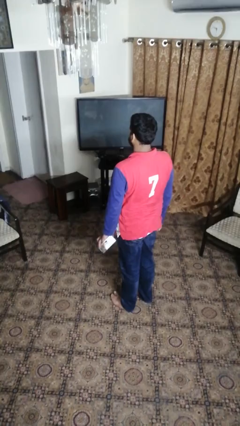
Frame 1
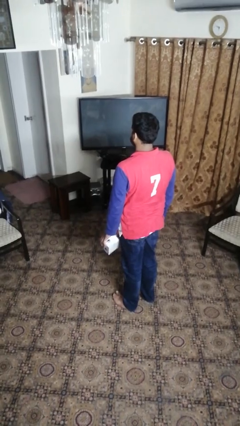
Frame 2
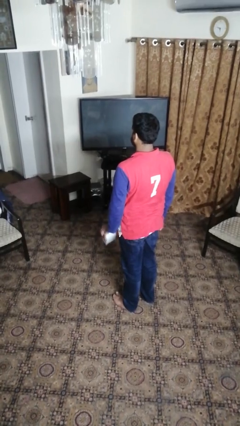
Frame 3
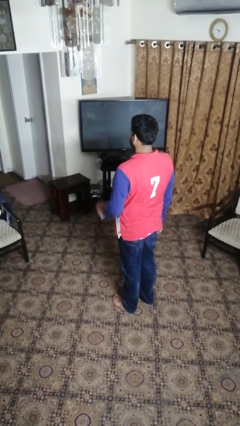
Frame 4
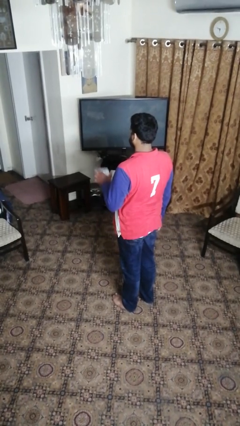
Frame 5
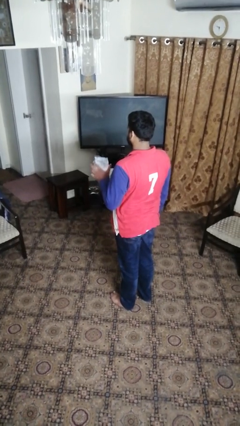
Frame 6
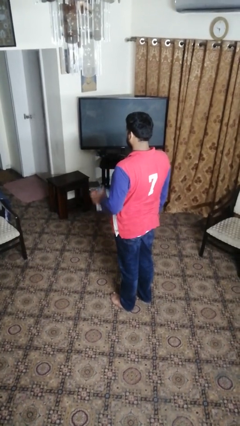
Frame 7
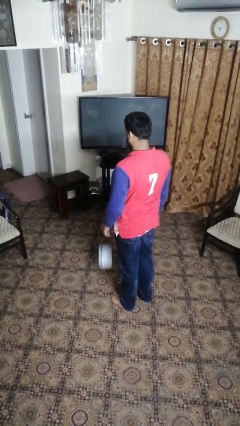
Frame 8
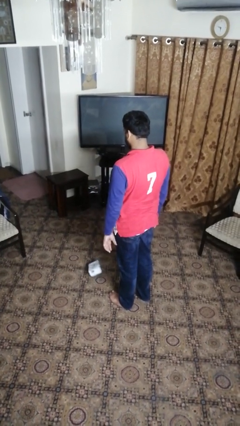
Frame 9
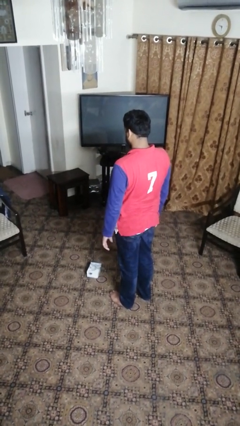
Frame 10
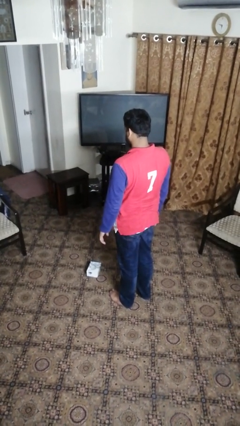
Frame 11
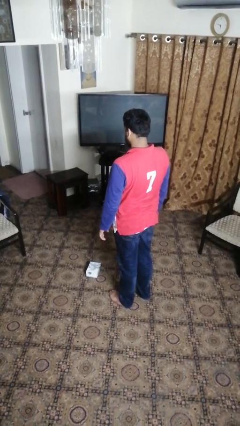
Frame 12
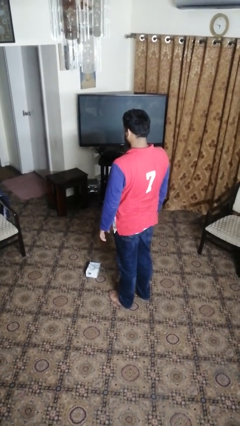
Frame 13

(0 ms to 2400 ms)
person throws object into air

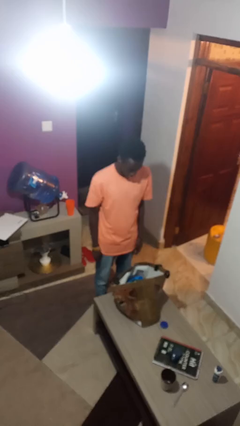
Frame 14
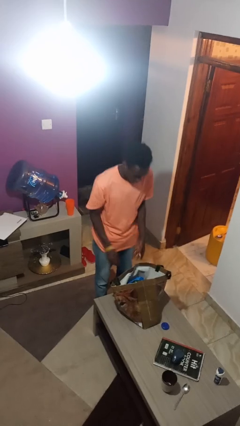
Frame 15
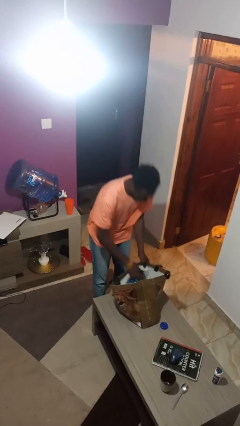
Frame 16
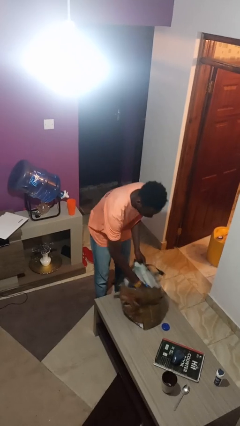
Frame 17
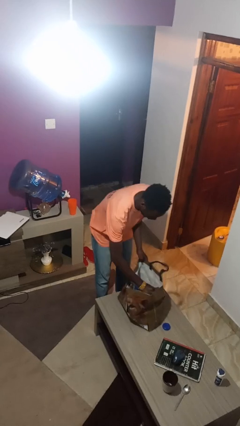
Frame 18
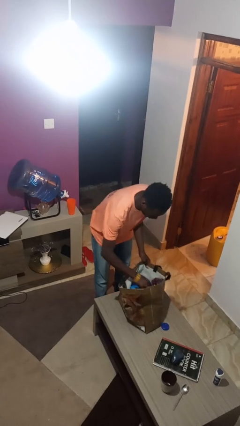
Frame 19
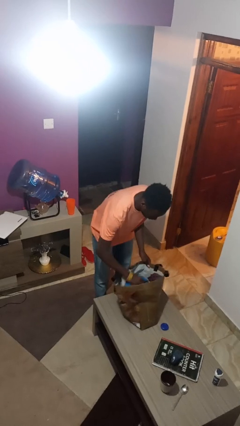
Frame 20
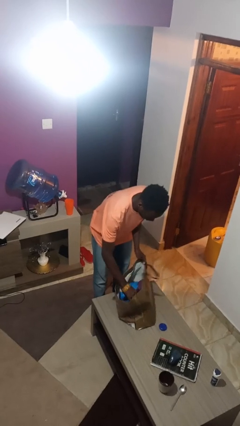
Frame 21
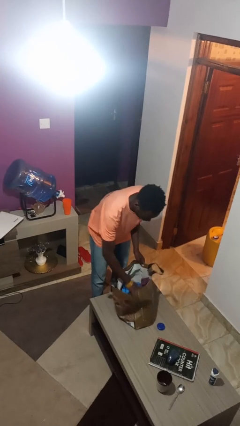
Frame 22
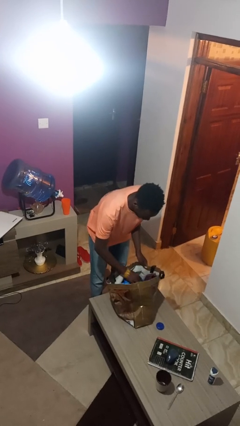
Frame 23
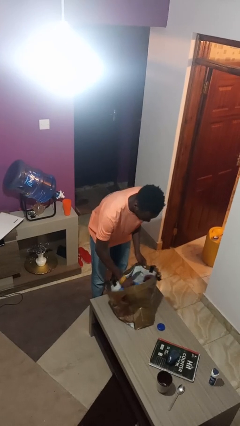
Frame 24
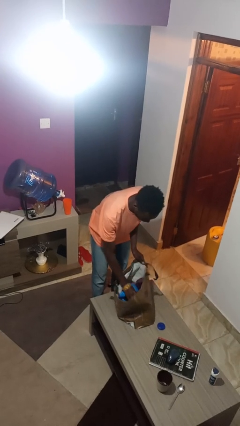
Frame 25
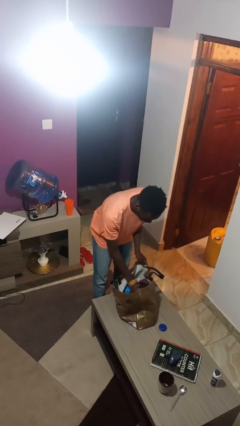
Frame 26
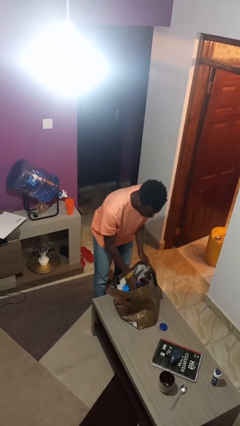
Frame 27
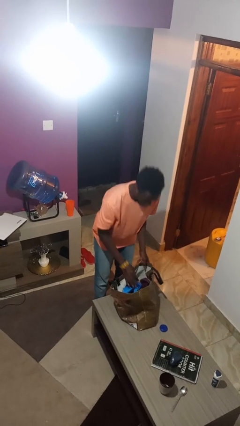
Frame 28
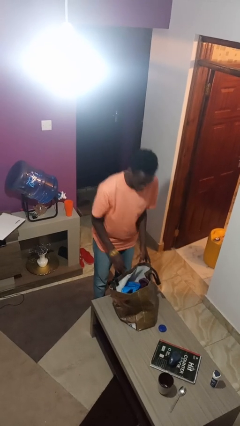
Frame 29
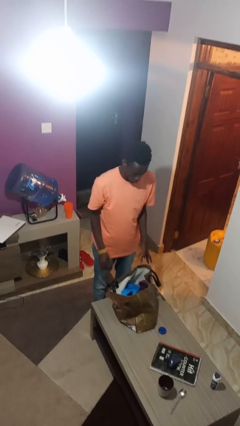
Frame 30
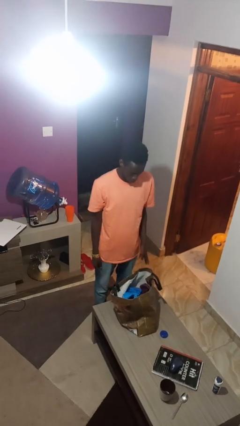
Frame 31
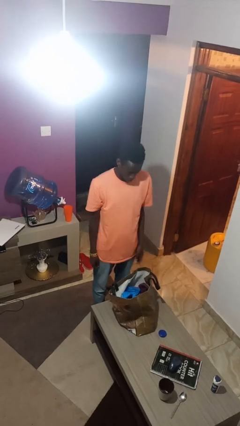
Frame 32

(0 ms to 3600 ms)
person searches in bag

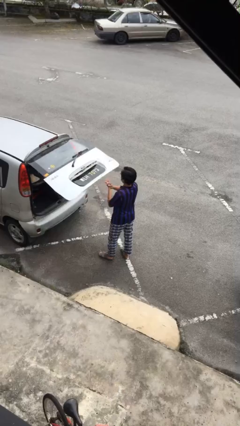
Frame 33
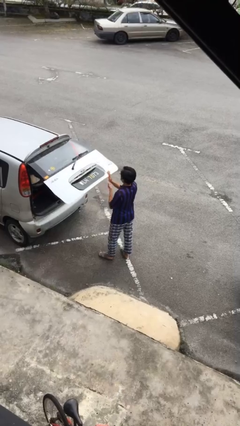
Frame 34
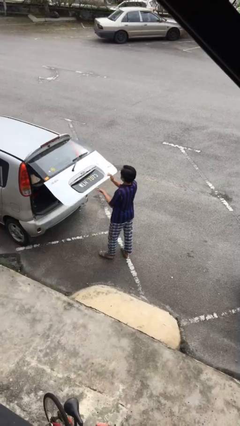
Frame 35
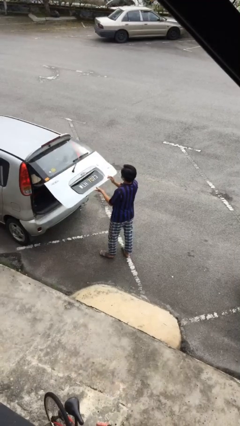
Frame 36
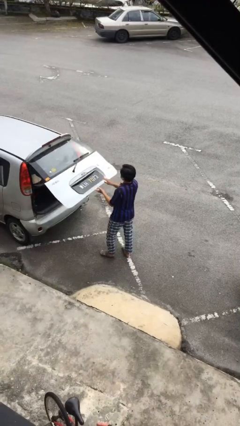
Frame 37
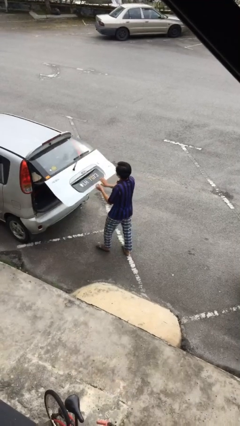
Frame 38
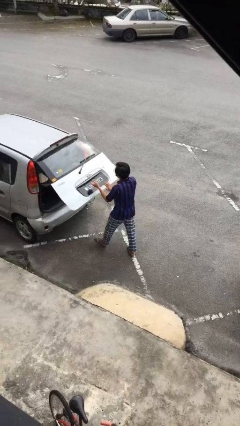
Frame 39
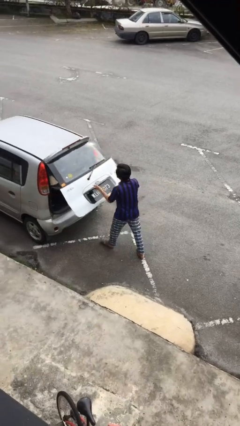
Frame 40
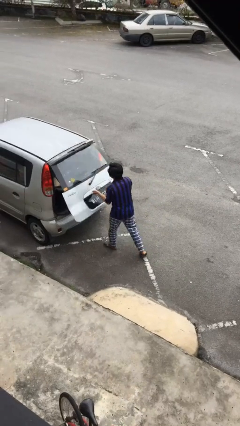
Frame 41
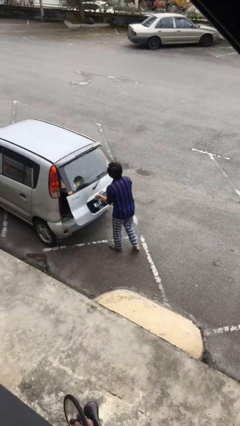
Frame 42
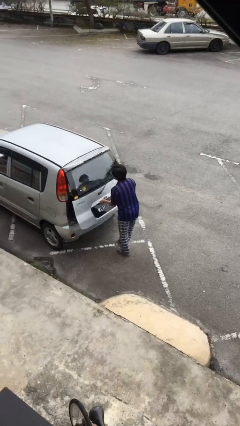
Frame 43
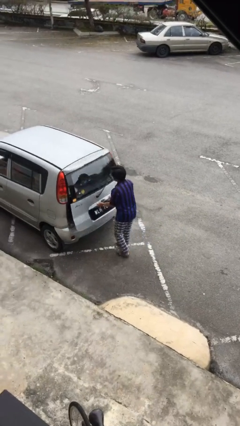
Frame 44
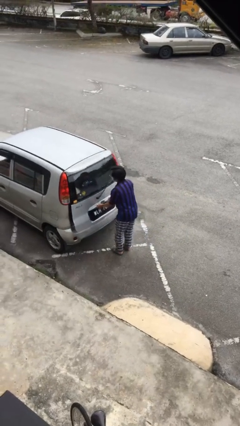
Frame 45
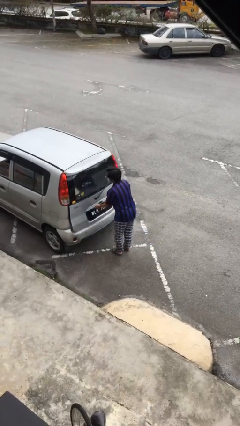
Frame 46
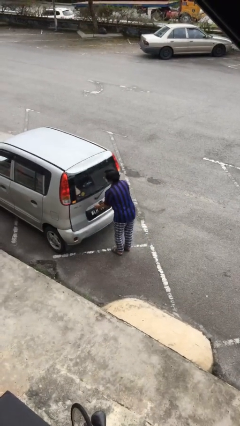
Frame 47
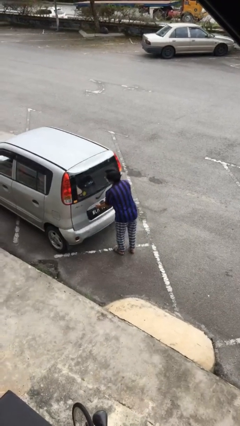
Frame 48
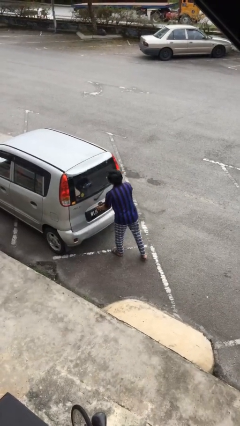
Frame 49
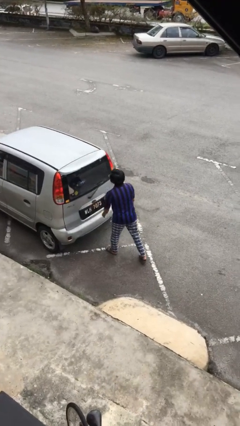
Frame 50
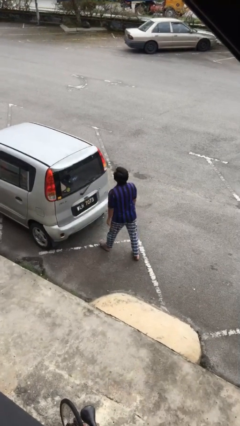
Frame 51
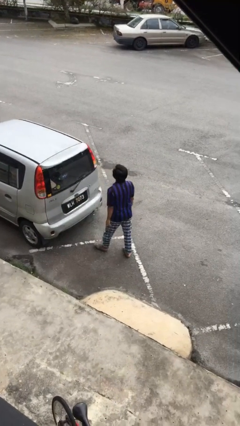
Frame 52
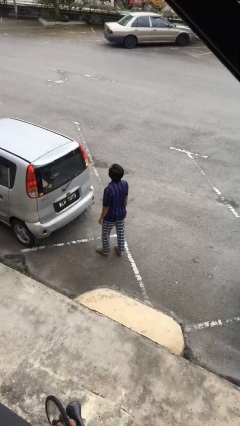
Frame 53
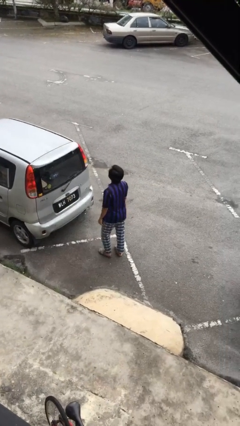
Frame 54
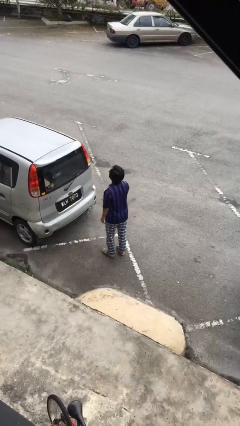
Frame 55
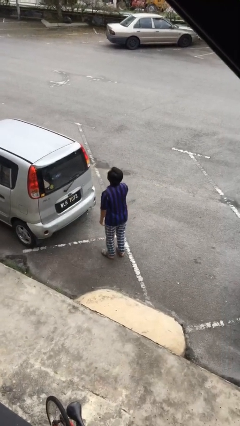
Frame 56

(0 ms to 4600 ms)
person closes car trunk

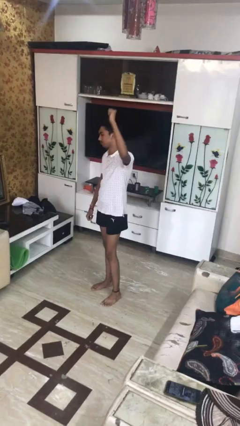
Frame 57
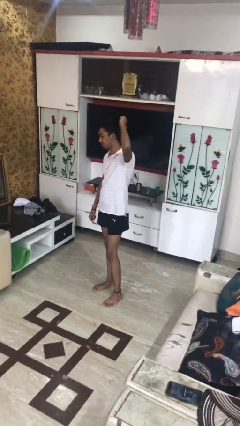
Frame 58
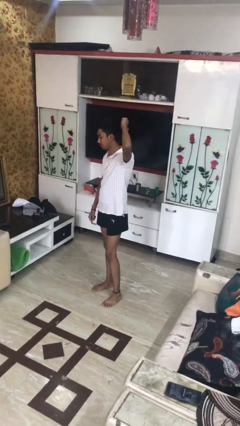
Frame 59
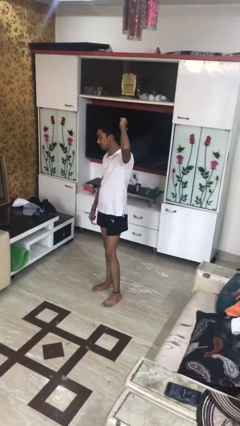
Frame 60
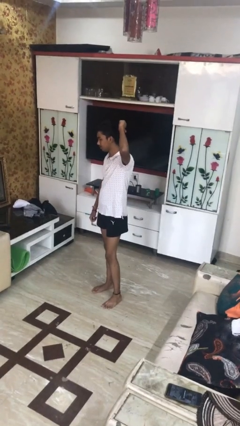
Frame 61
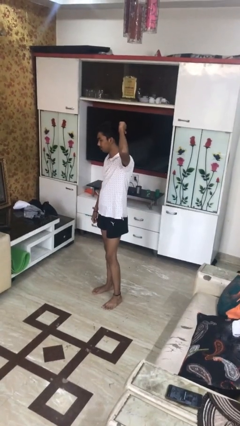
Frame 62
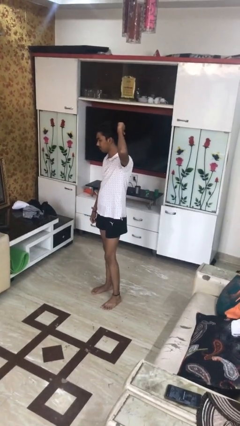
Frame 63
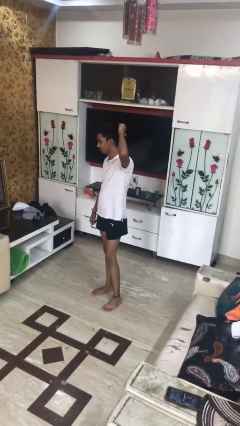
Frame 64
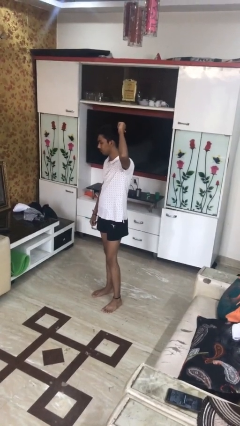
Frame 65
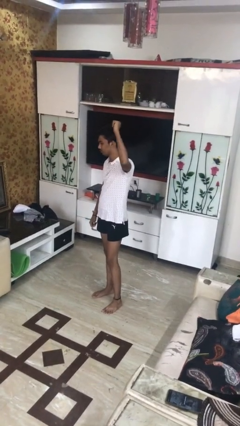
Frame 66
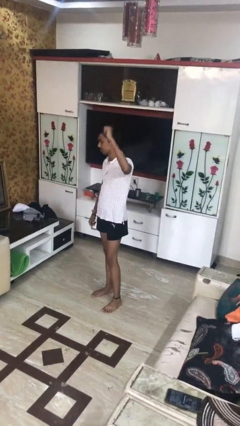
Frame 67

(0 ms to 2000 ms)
person gestures behind me

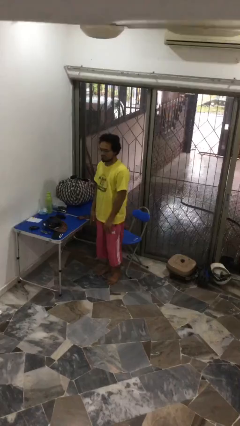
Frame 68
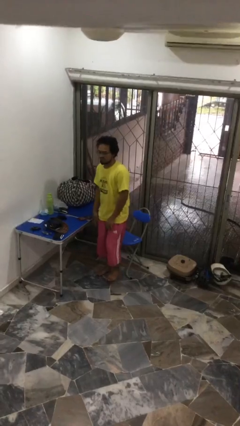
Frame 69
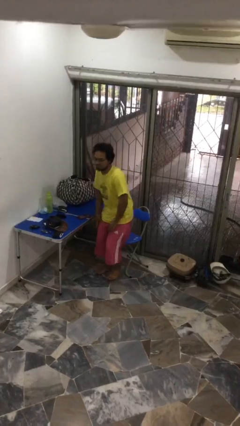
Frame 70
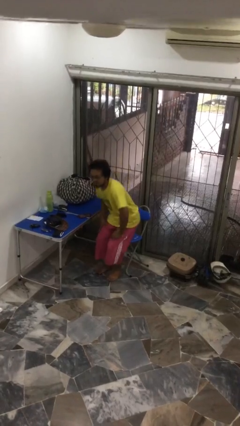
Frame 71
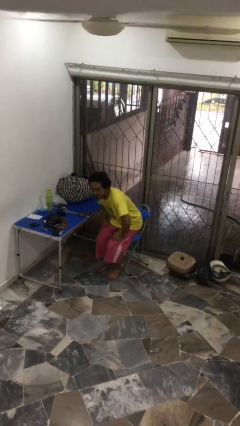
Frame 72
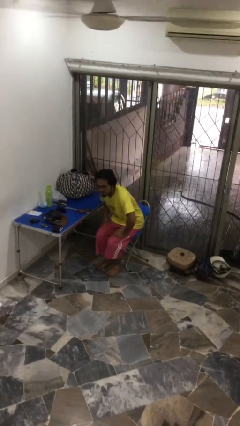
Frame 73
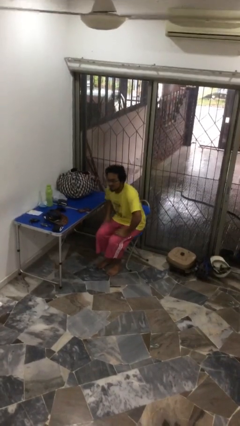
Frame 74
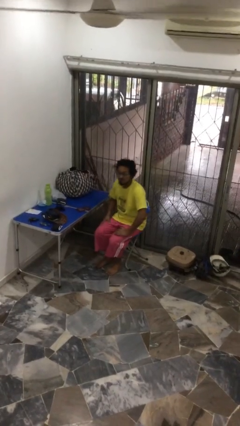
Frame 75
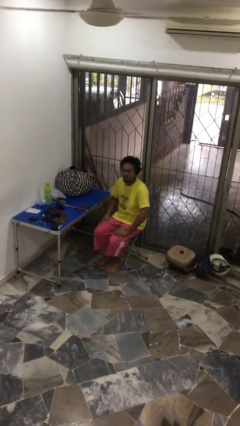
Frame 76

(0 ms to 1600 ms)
person sits down

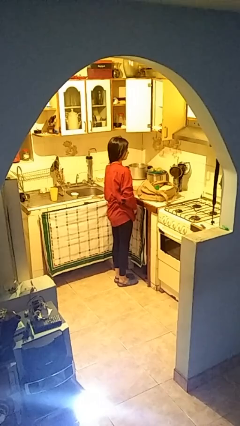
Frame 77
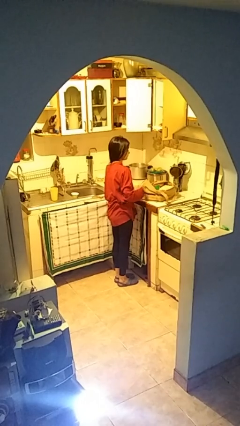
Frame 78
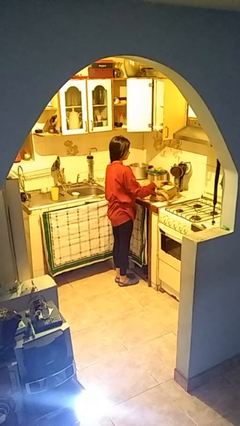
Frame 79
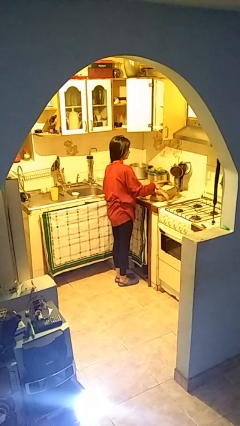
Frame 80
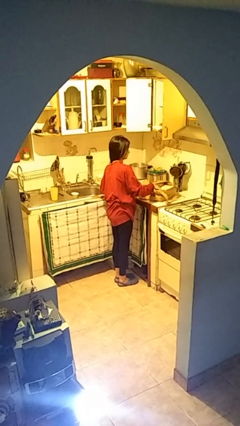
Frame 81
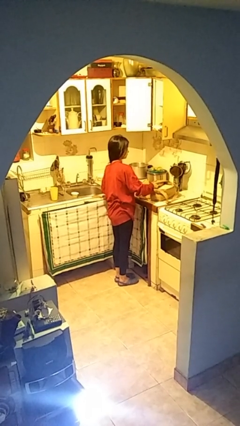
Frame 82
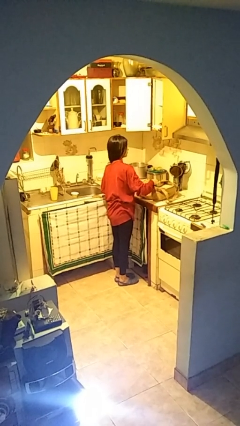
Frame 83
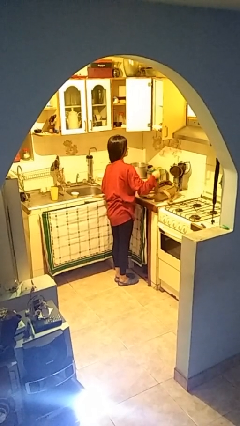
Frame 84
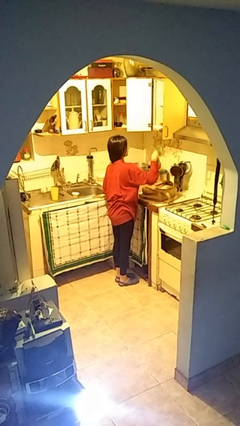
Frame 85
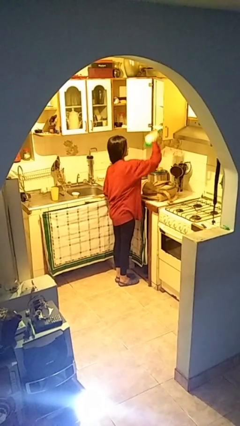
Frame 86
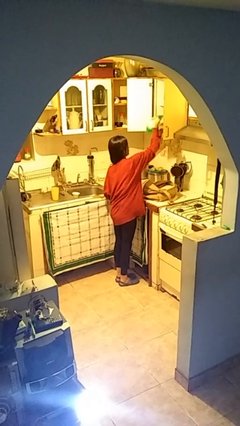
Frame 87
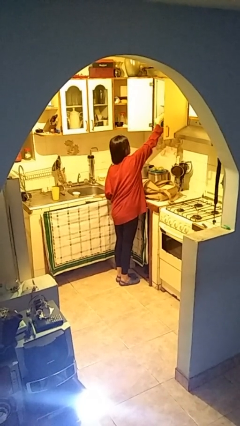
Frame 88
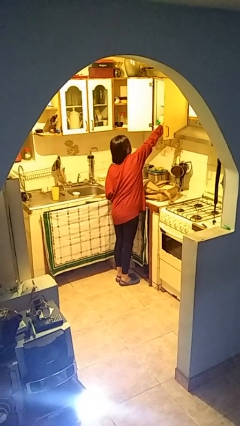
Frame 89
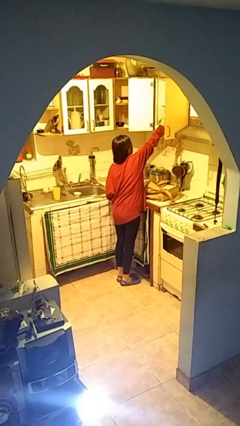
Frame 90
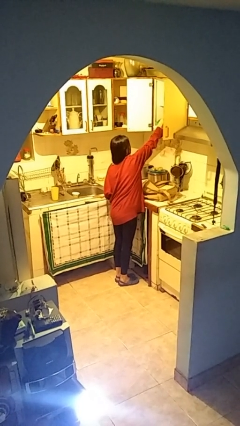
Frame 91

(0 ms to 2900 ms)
person loads groceries into cabinet

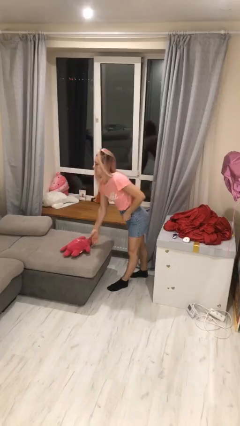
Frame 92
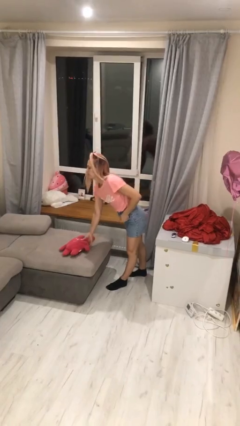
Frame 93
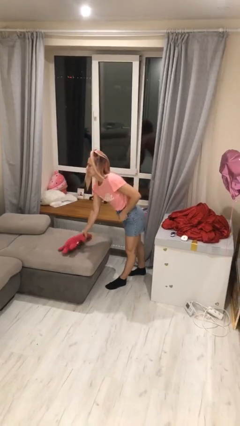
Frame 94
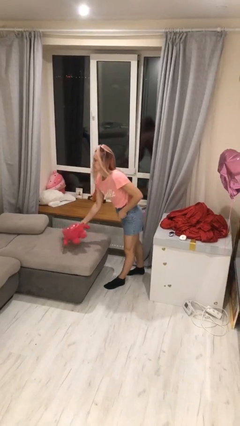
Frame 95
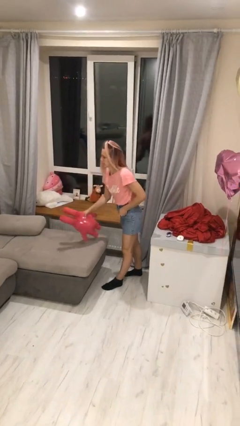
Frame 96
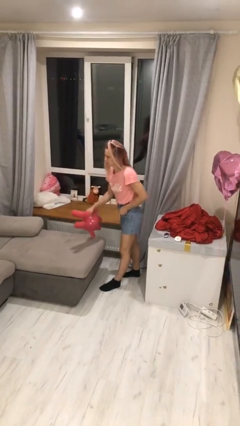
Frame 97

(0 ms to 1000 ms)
person picks up object from bed
